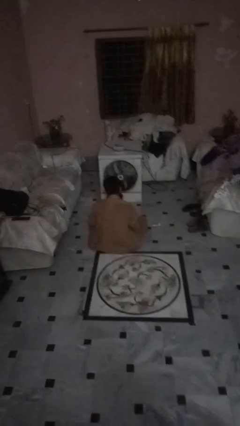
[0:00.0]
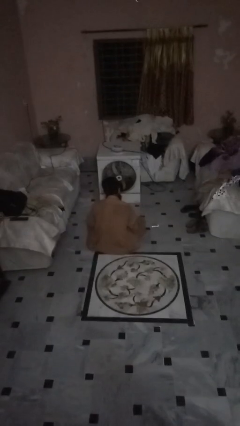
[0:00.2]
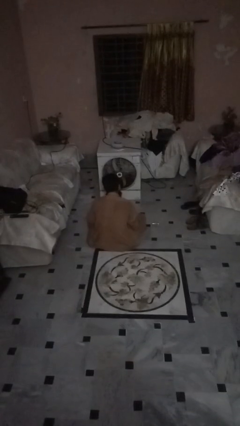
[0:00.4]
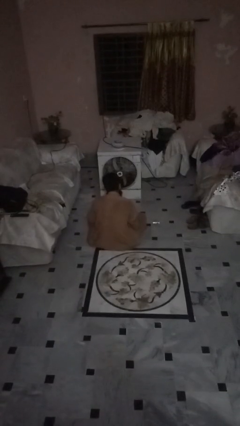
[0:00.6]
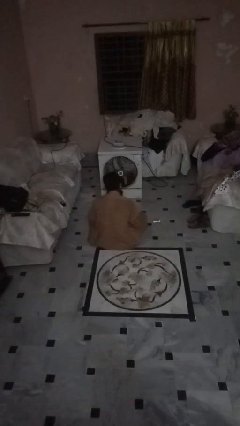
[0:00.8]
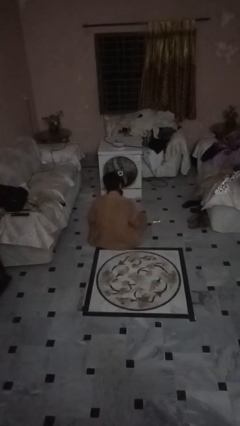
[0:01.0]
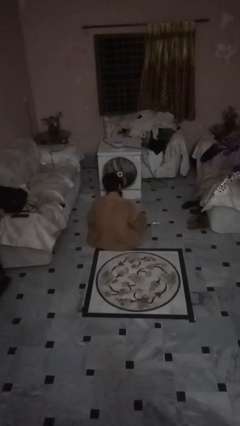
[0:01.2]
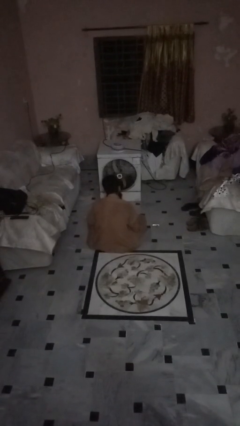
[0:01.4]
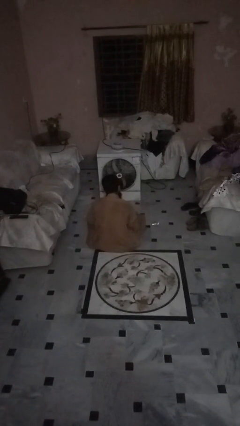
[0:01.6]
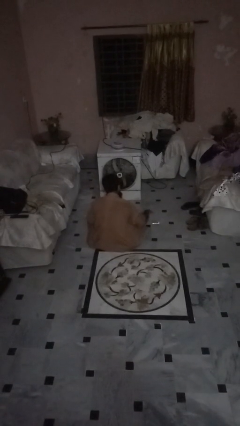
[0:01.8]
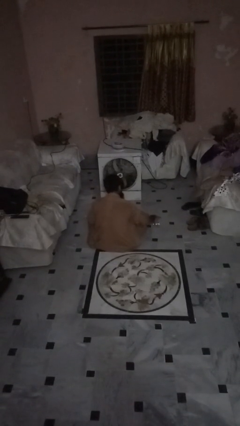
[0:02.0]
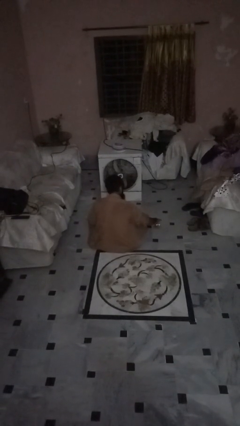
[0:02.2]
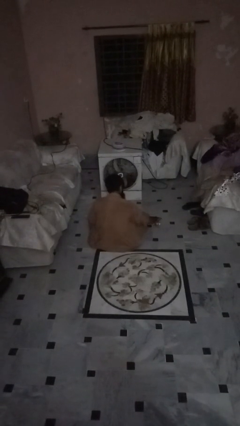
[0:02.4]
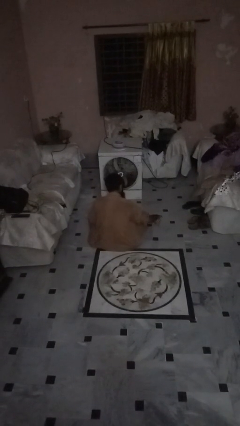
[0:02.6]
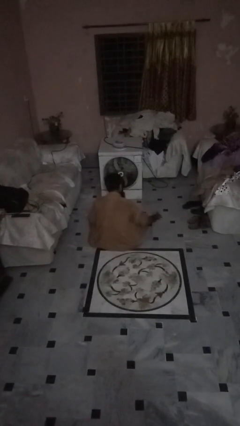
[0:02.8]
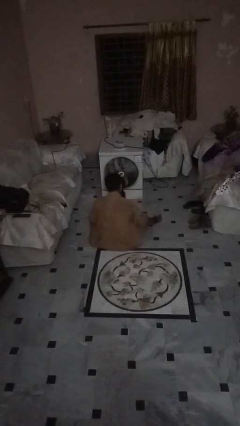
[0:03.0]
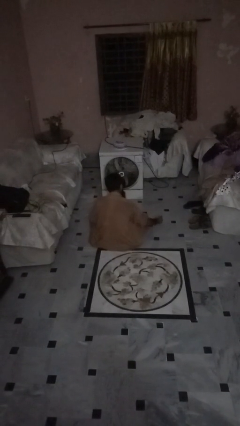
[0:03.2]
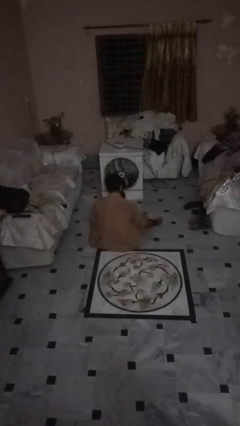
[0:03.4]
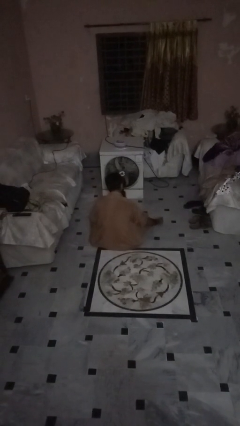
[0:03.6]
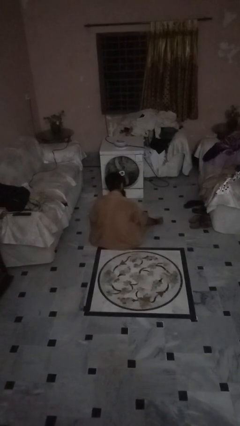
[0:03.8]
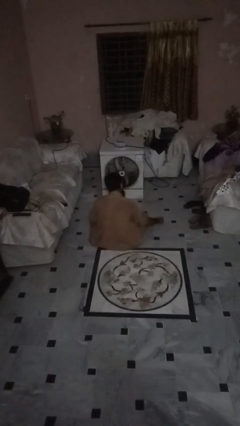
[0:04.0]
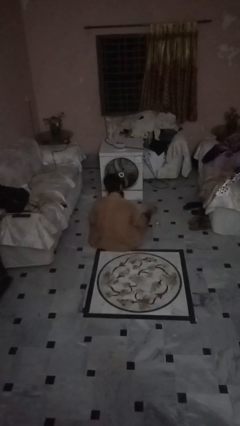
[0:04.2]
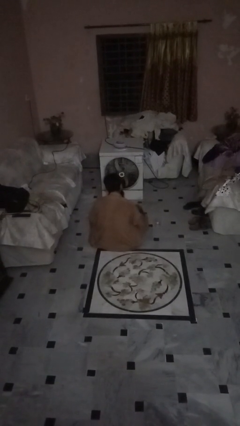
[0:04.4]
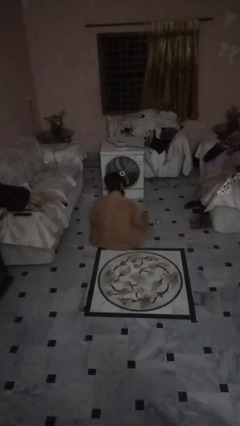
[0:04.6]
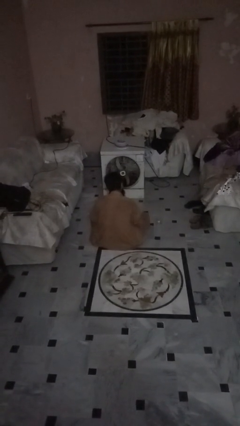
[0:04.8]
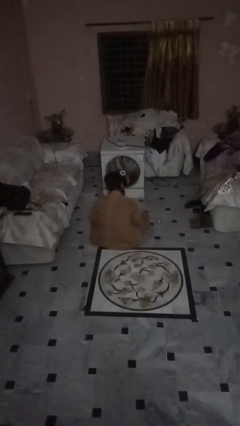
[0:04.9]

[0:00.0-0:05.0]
person sets upright glass

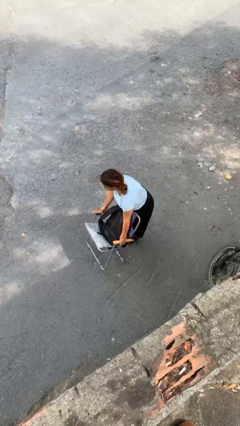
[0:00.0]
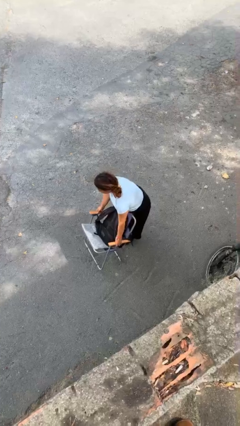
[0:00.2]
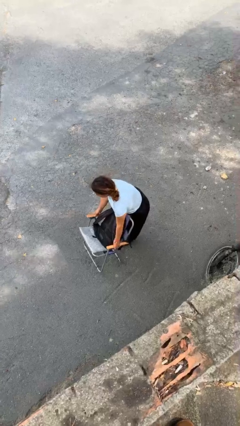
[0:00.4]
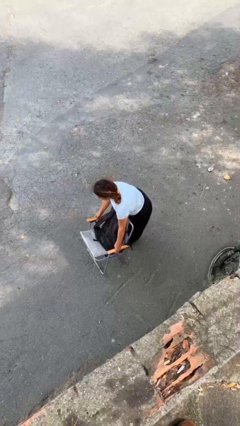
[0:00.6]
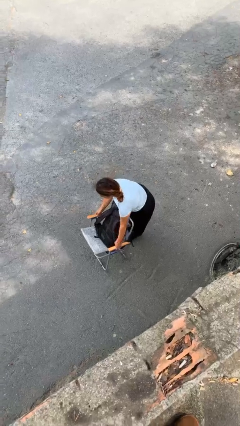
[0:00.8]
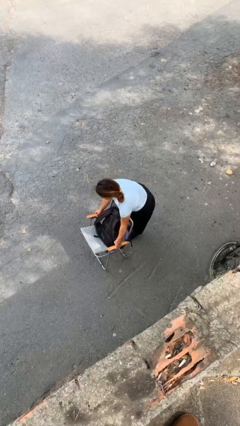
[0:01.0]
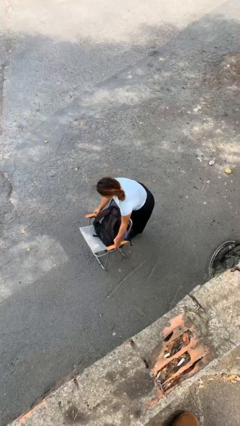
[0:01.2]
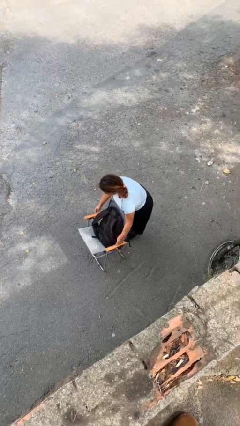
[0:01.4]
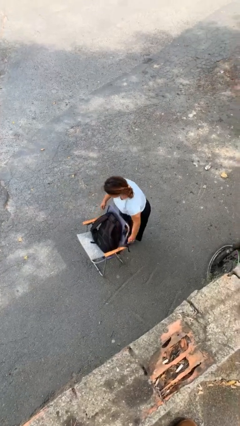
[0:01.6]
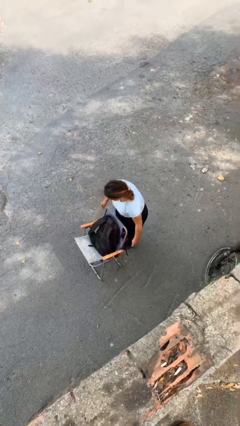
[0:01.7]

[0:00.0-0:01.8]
person puts down object on floor

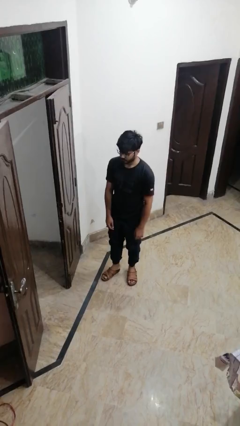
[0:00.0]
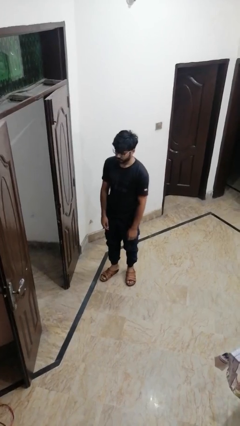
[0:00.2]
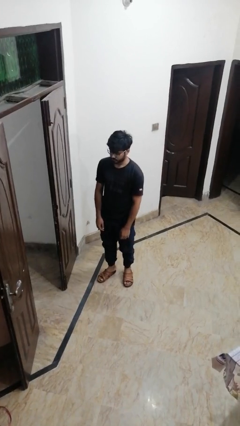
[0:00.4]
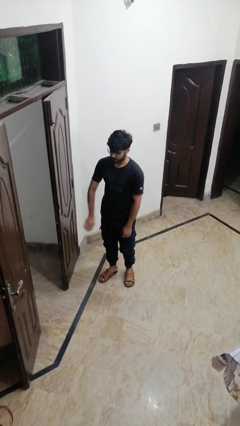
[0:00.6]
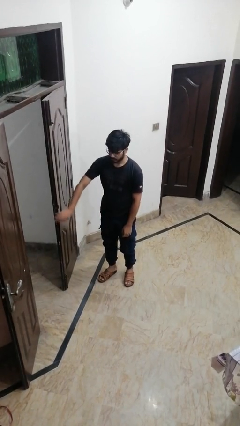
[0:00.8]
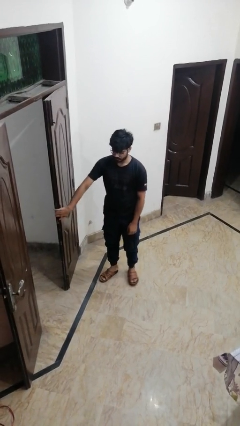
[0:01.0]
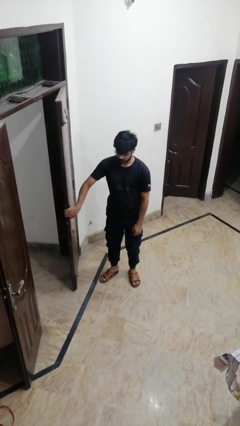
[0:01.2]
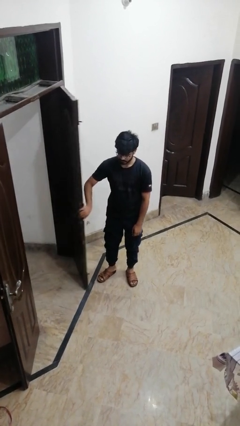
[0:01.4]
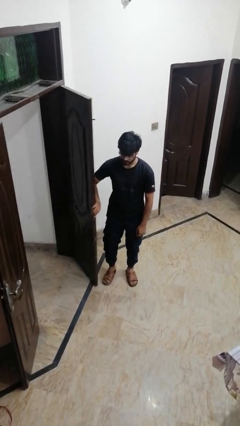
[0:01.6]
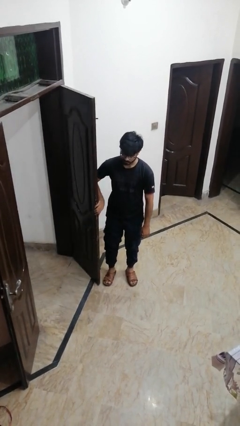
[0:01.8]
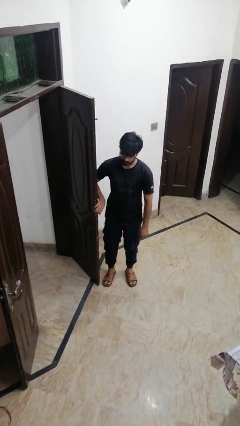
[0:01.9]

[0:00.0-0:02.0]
person opens facility door

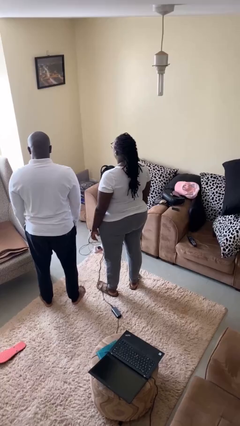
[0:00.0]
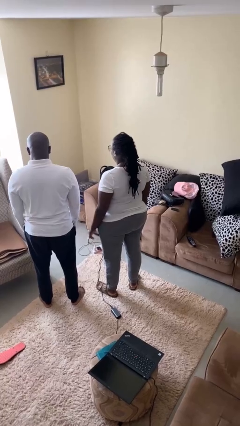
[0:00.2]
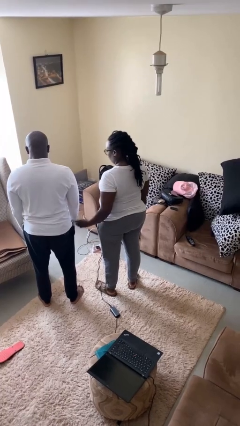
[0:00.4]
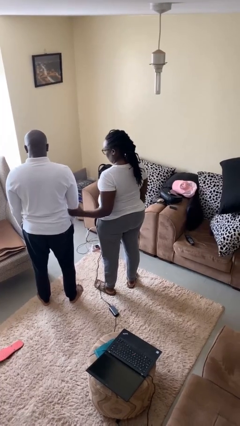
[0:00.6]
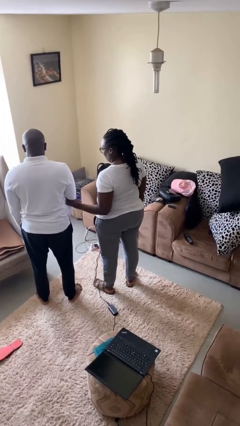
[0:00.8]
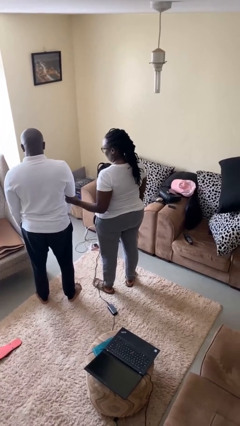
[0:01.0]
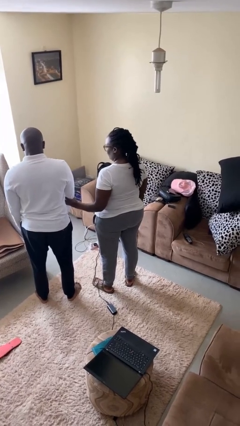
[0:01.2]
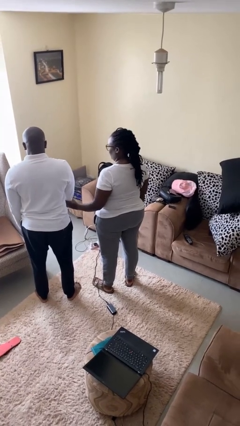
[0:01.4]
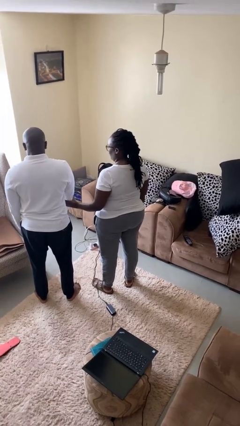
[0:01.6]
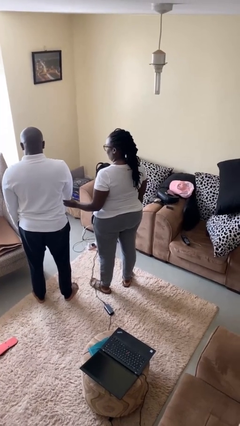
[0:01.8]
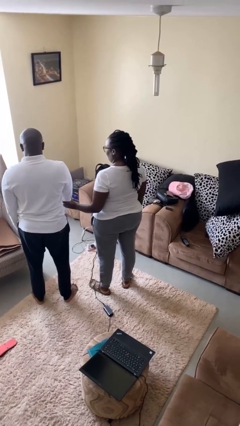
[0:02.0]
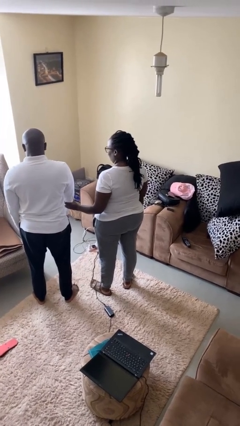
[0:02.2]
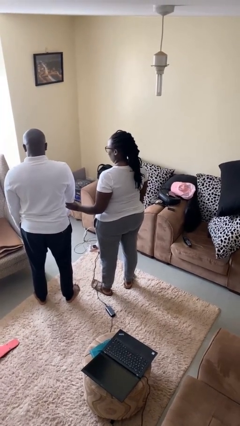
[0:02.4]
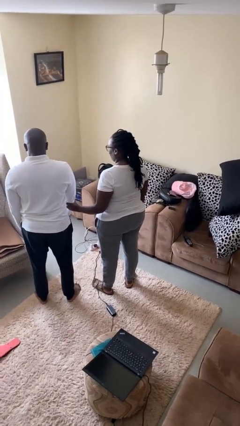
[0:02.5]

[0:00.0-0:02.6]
person grabs person by forearm

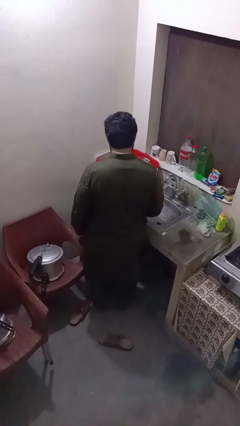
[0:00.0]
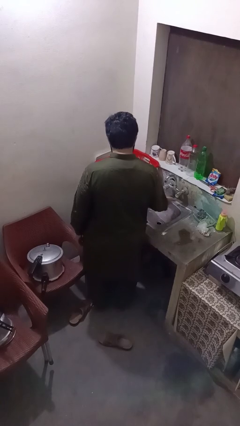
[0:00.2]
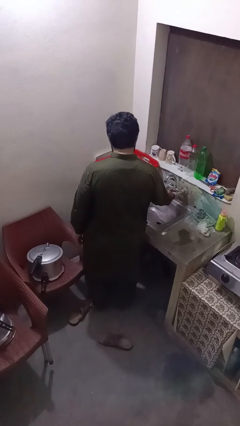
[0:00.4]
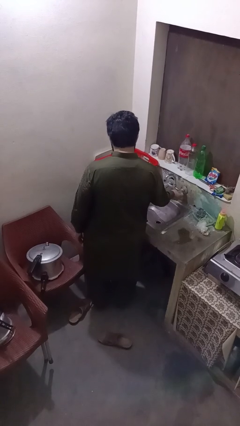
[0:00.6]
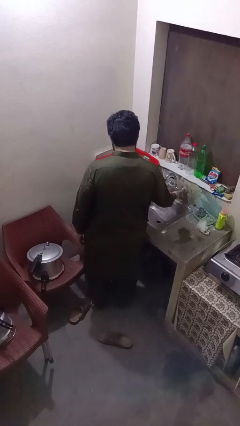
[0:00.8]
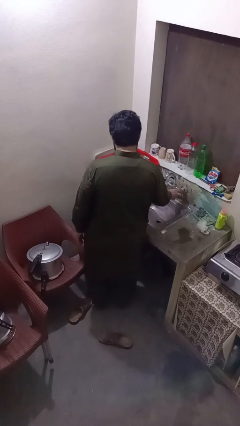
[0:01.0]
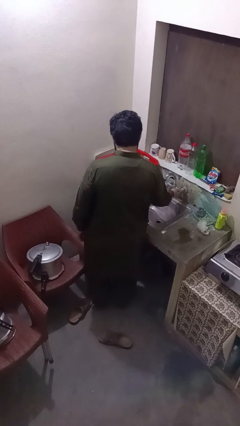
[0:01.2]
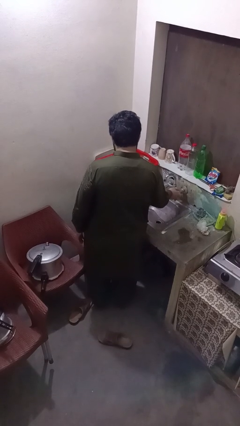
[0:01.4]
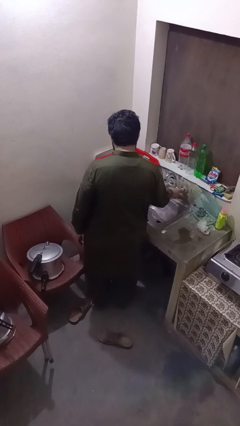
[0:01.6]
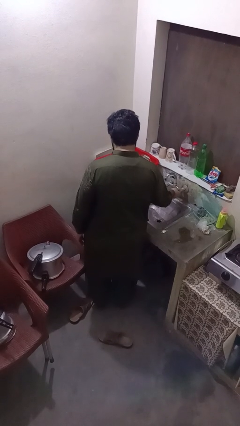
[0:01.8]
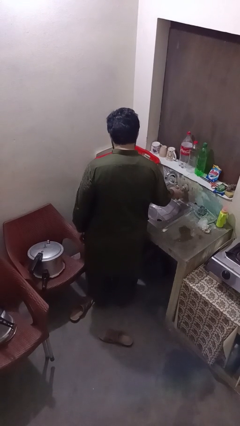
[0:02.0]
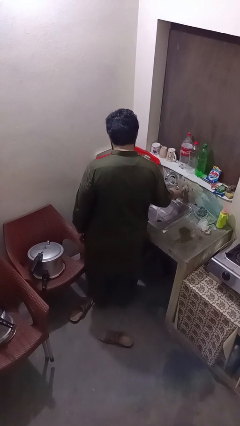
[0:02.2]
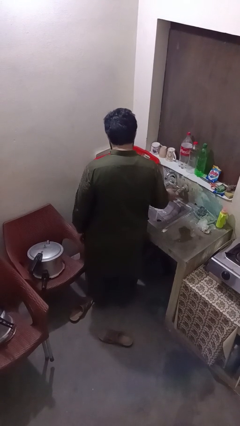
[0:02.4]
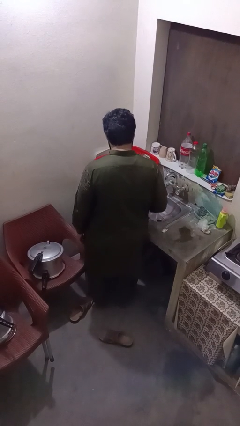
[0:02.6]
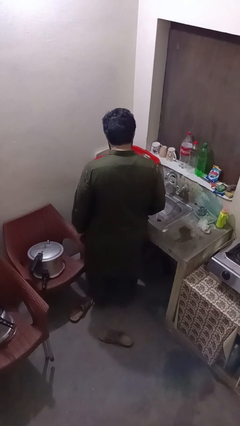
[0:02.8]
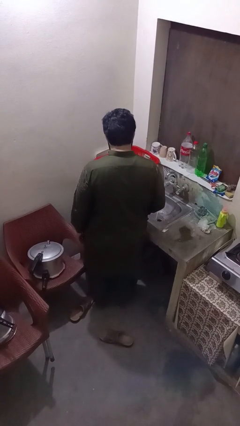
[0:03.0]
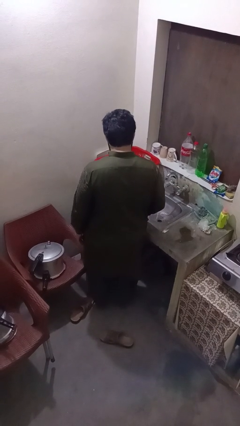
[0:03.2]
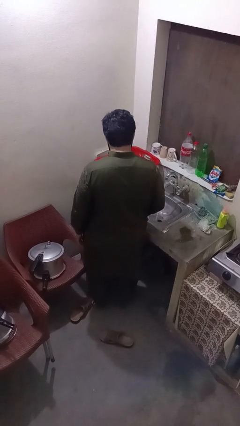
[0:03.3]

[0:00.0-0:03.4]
person turns on faucet

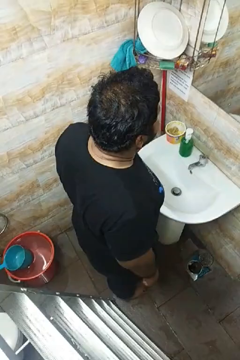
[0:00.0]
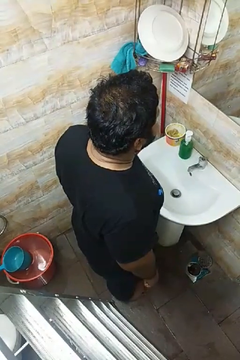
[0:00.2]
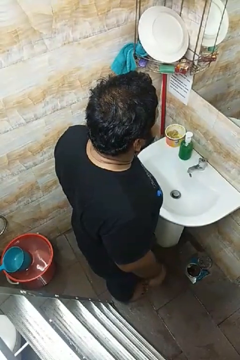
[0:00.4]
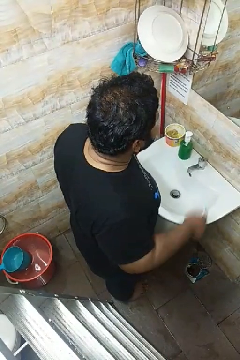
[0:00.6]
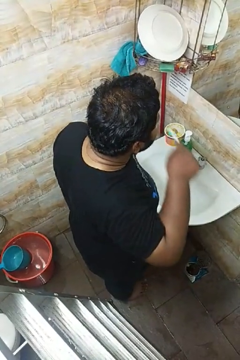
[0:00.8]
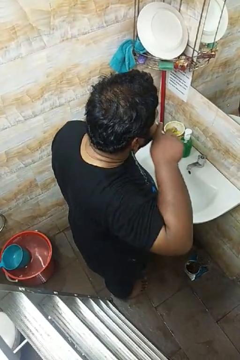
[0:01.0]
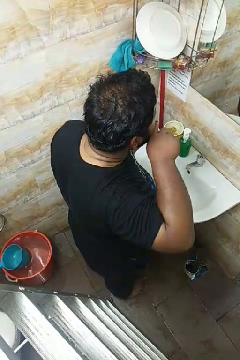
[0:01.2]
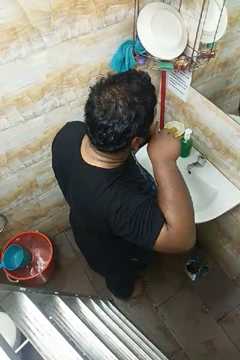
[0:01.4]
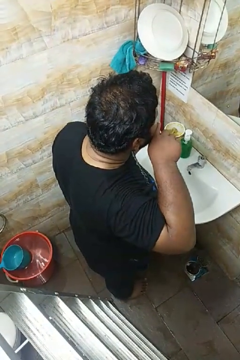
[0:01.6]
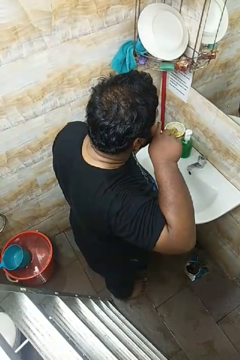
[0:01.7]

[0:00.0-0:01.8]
person brushes teeth

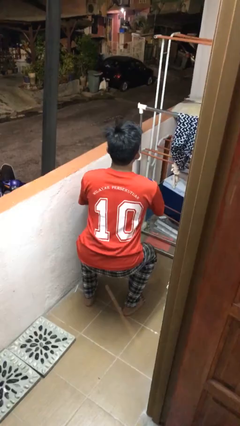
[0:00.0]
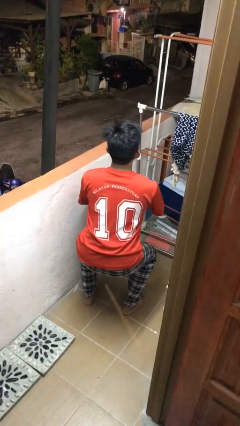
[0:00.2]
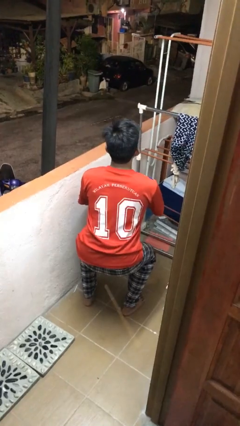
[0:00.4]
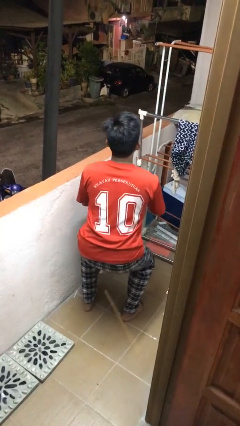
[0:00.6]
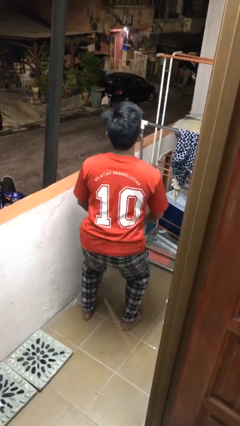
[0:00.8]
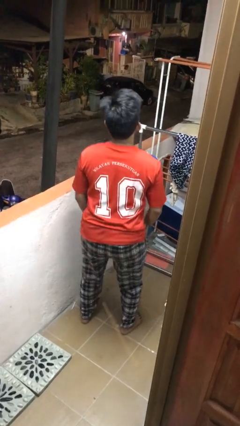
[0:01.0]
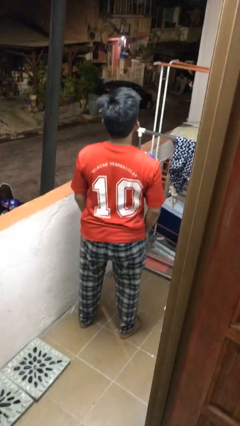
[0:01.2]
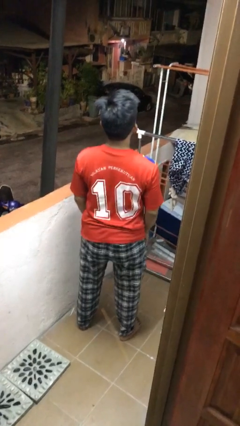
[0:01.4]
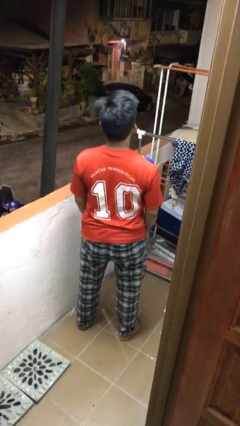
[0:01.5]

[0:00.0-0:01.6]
person stands up
